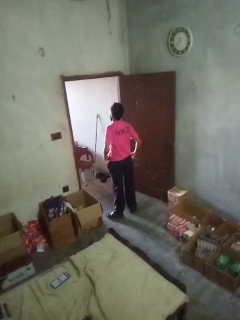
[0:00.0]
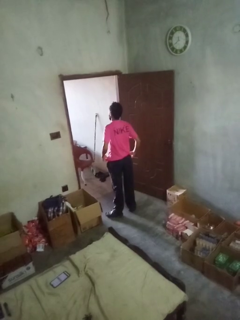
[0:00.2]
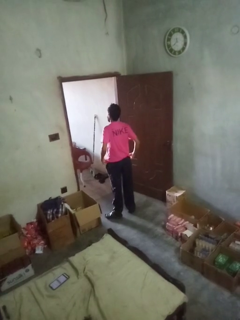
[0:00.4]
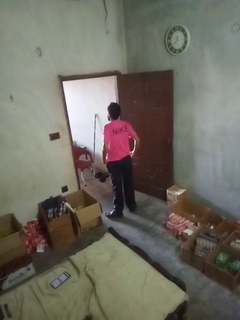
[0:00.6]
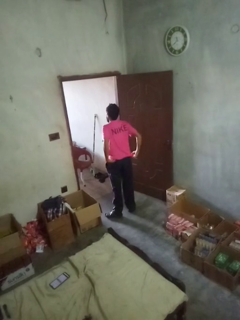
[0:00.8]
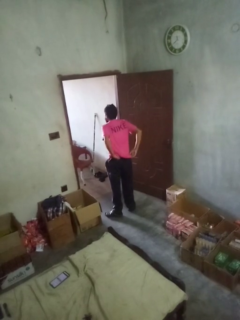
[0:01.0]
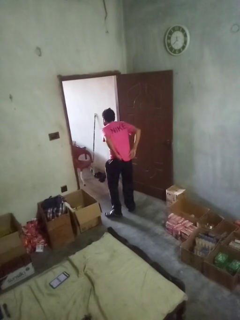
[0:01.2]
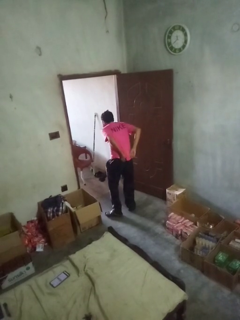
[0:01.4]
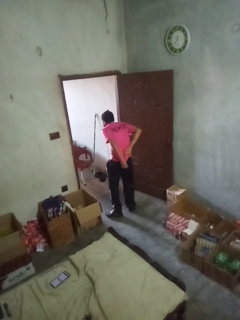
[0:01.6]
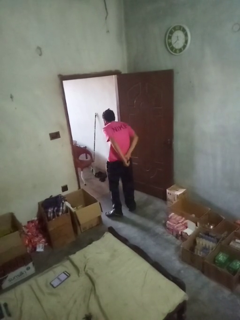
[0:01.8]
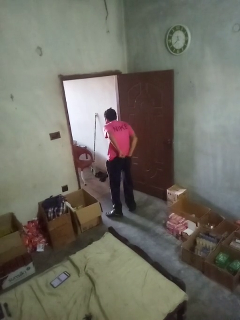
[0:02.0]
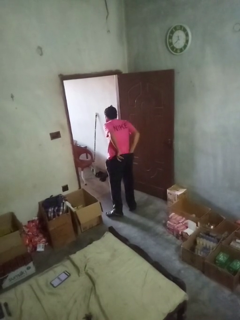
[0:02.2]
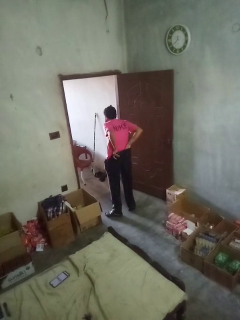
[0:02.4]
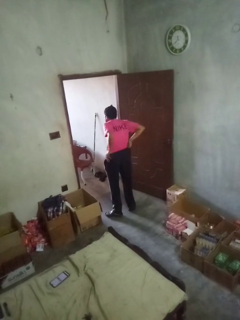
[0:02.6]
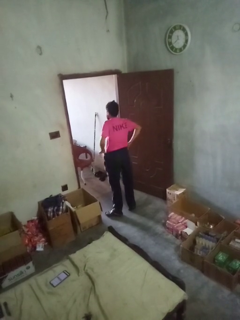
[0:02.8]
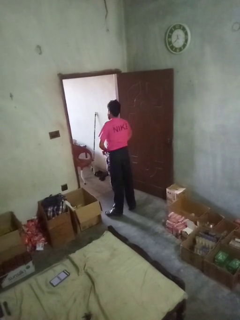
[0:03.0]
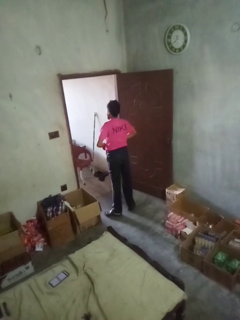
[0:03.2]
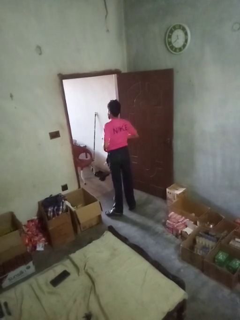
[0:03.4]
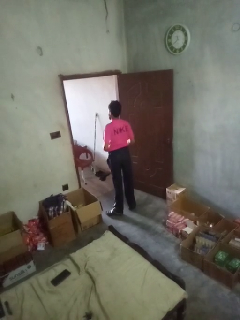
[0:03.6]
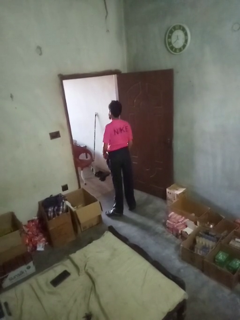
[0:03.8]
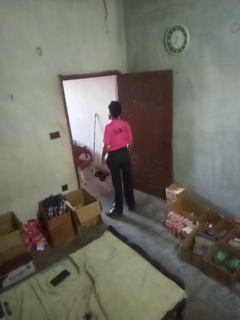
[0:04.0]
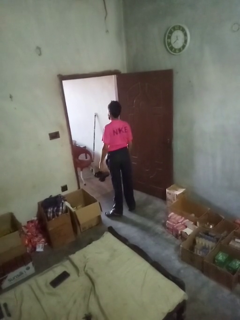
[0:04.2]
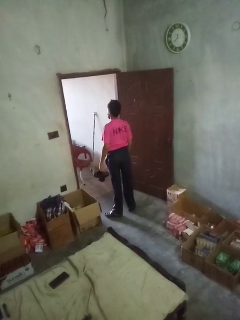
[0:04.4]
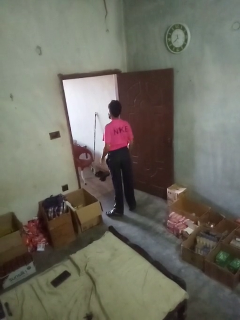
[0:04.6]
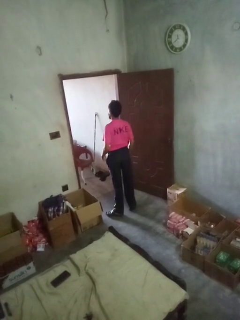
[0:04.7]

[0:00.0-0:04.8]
person tucks in shirt

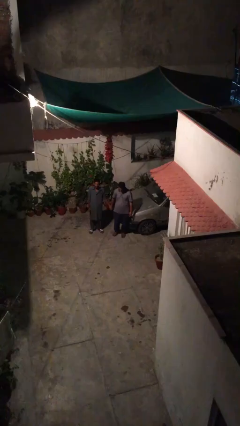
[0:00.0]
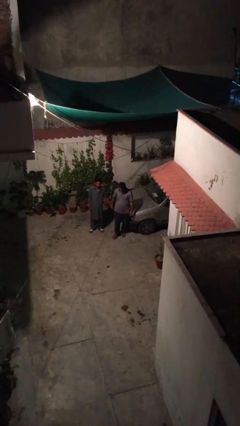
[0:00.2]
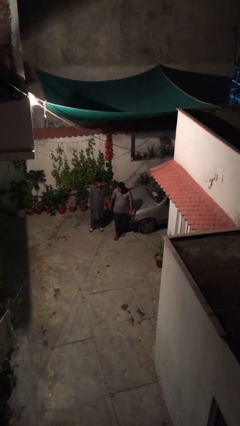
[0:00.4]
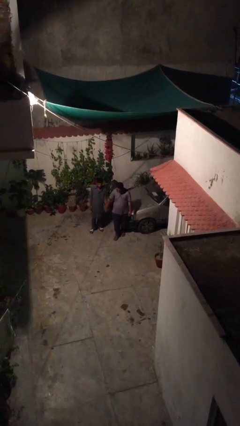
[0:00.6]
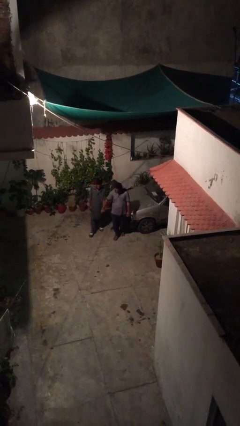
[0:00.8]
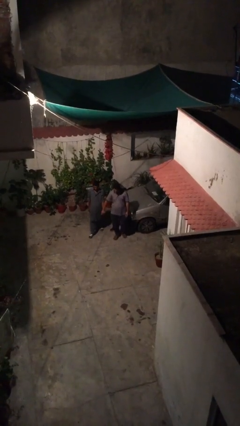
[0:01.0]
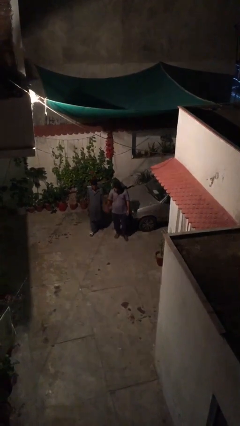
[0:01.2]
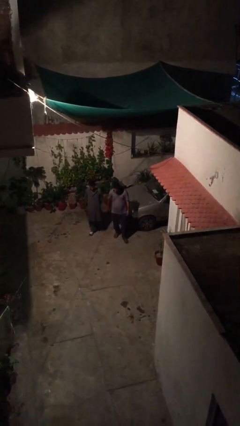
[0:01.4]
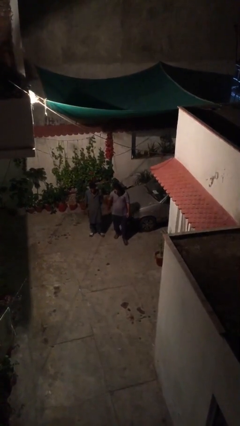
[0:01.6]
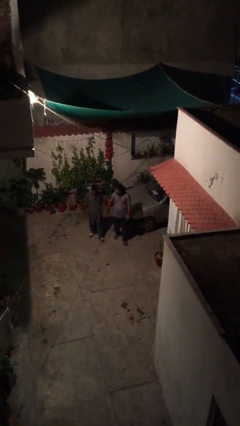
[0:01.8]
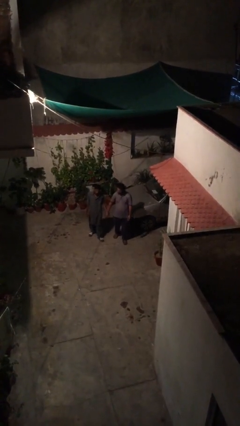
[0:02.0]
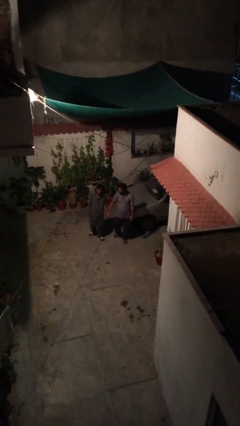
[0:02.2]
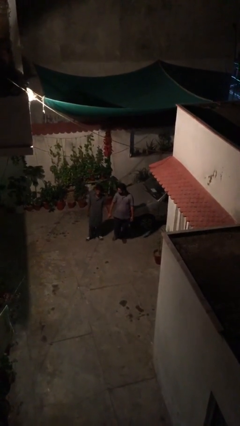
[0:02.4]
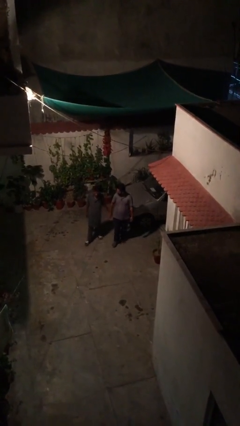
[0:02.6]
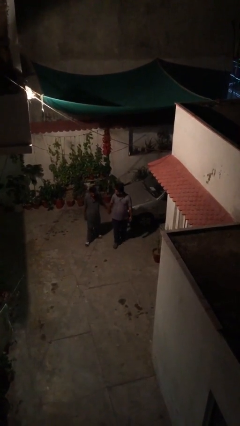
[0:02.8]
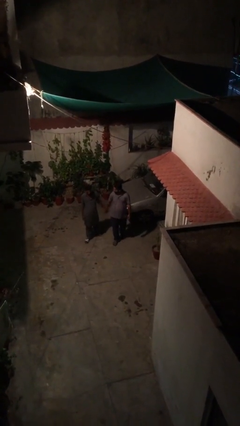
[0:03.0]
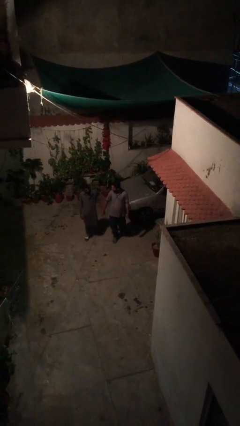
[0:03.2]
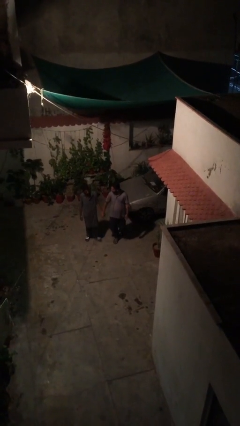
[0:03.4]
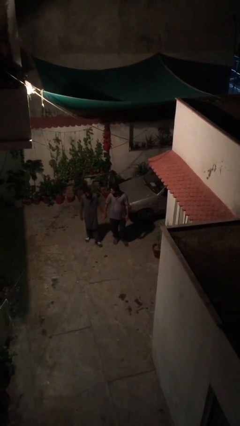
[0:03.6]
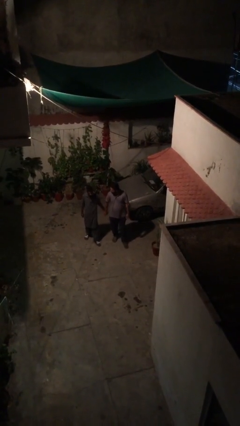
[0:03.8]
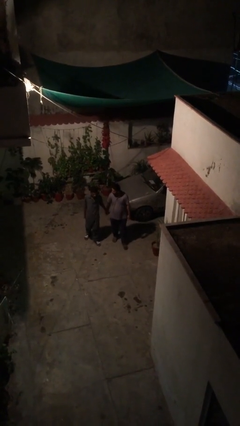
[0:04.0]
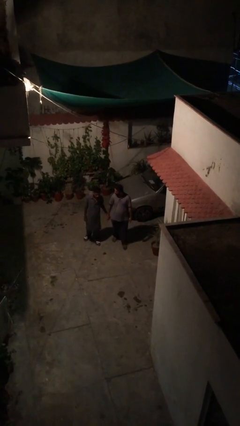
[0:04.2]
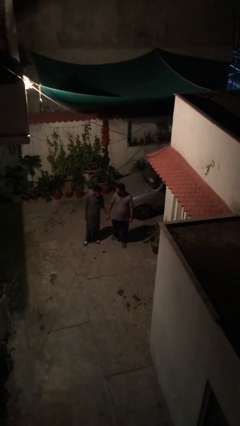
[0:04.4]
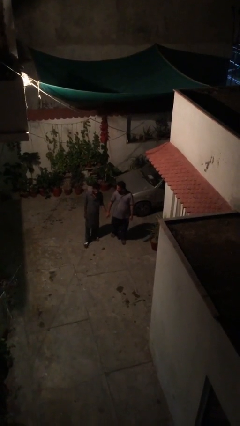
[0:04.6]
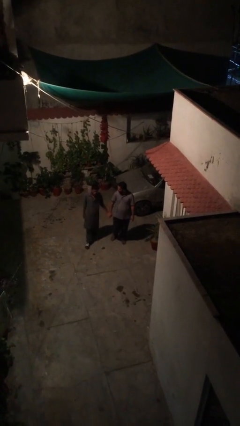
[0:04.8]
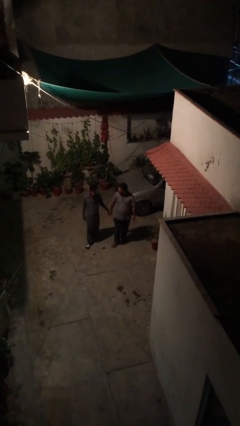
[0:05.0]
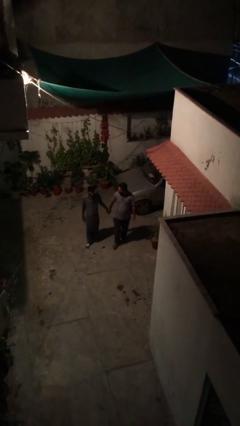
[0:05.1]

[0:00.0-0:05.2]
person holds hand

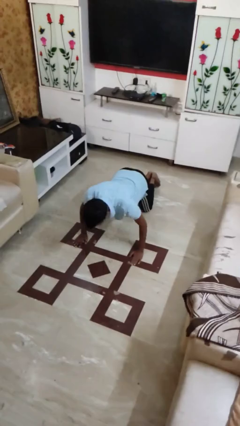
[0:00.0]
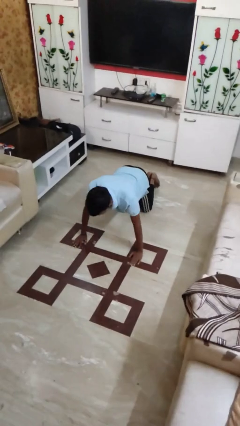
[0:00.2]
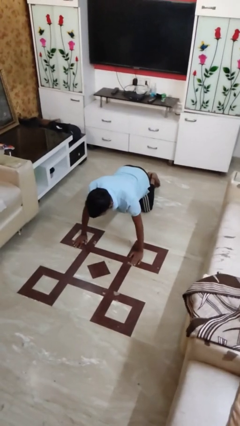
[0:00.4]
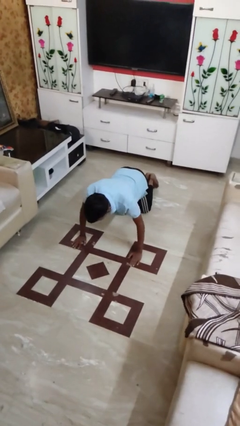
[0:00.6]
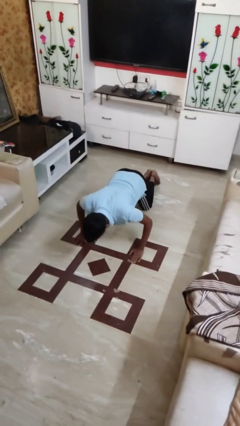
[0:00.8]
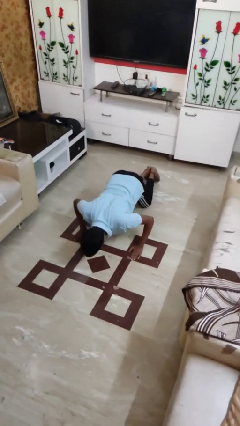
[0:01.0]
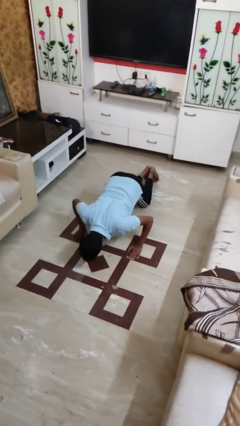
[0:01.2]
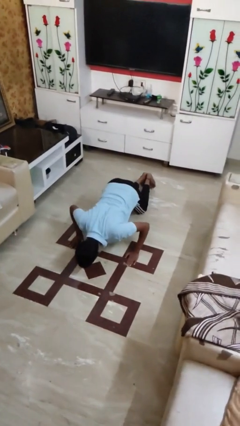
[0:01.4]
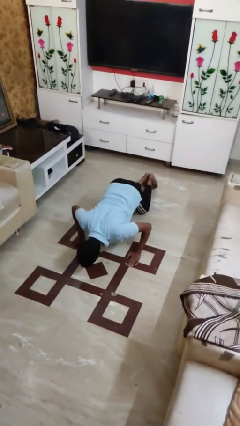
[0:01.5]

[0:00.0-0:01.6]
person exercises with pushup

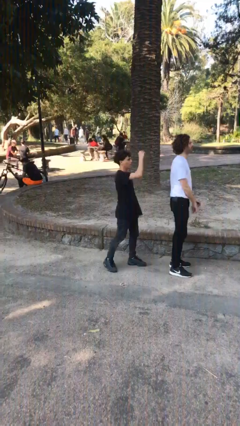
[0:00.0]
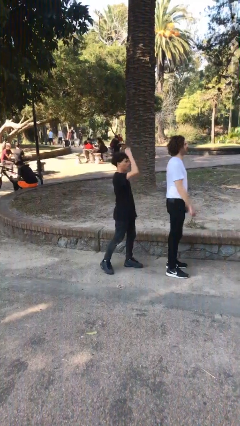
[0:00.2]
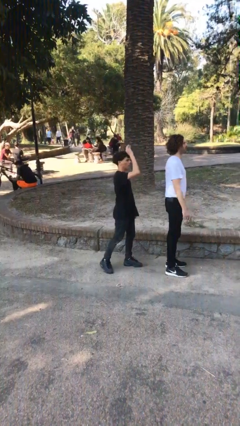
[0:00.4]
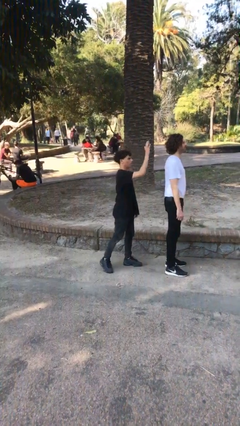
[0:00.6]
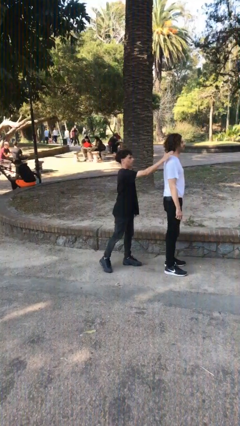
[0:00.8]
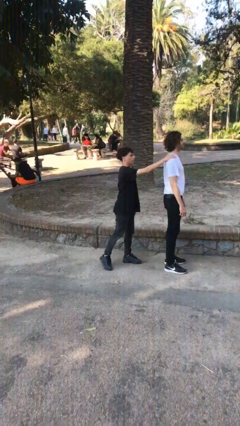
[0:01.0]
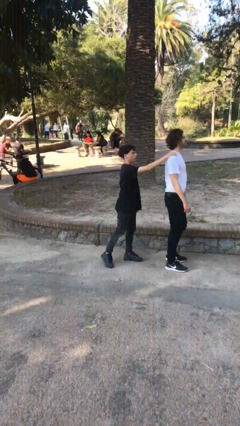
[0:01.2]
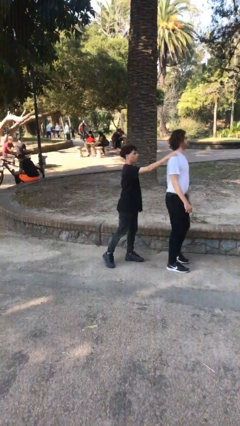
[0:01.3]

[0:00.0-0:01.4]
person grabs person by shoulder

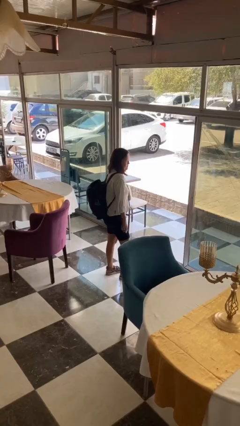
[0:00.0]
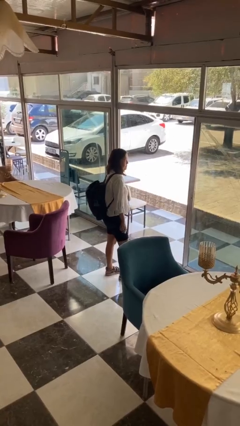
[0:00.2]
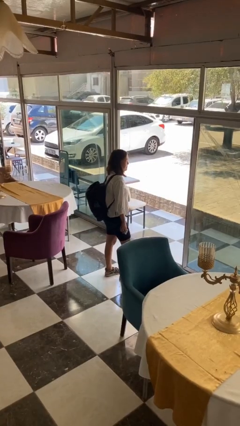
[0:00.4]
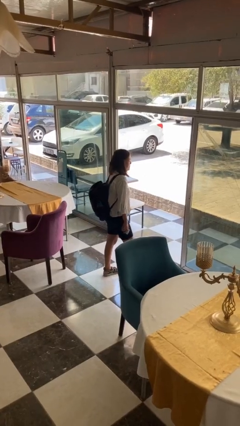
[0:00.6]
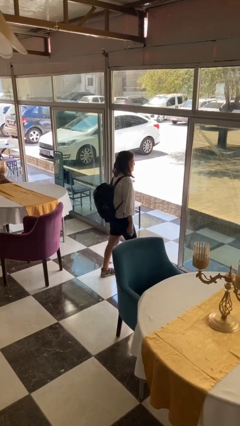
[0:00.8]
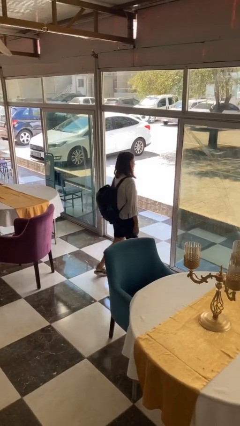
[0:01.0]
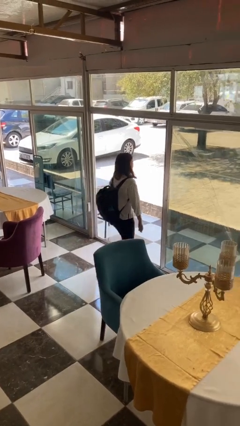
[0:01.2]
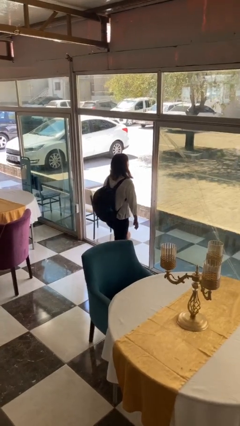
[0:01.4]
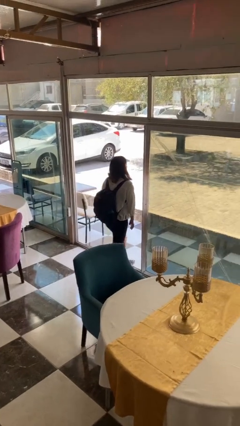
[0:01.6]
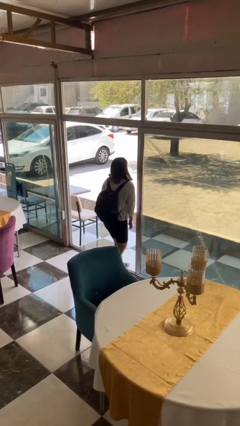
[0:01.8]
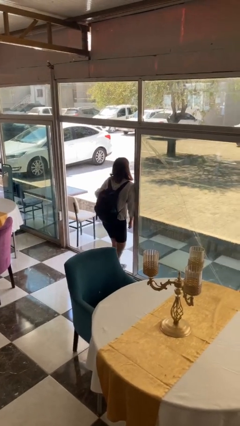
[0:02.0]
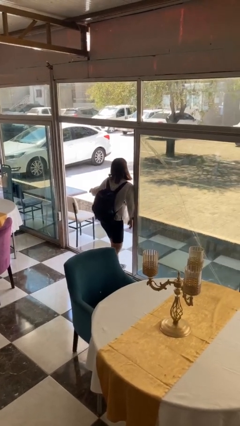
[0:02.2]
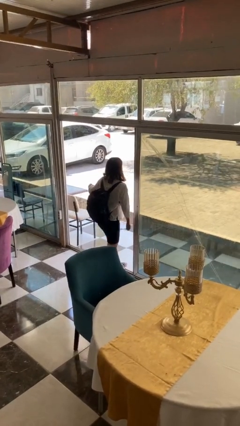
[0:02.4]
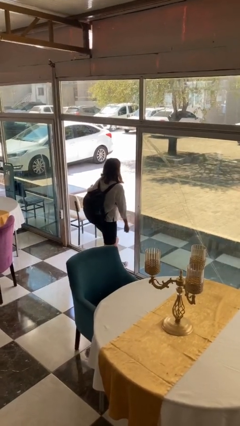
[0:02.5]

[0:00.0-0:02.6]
person bumps into wall

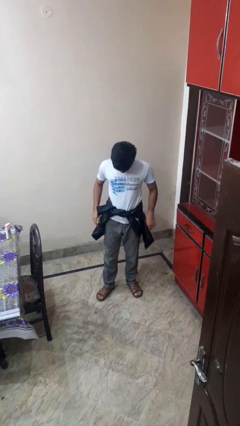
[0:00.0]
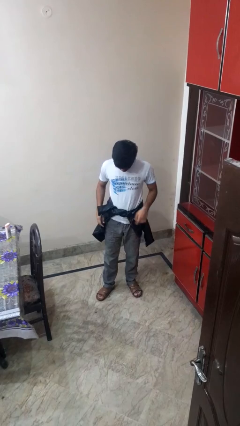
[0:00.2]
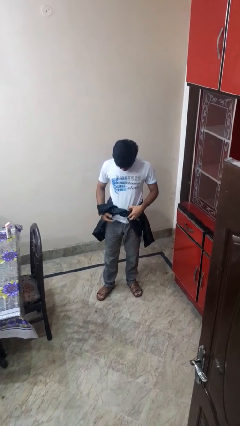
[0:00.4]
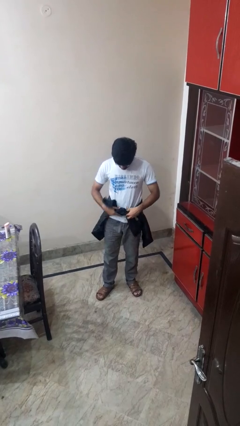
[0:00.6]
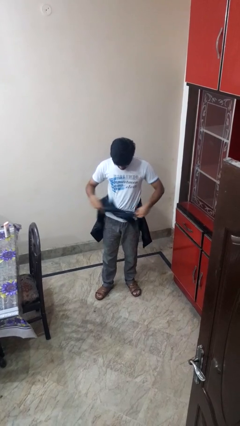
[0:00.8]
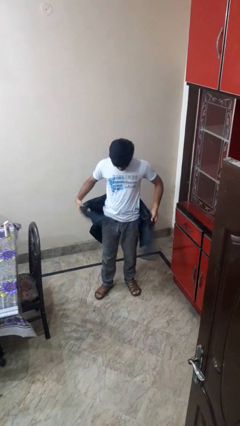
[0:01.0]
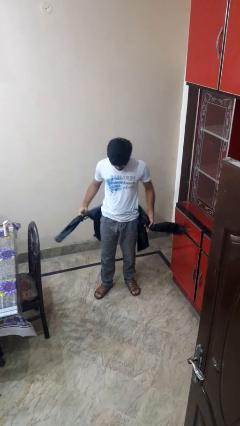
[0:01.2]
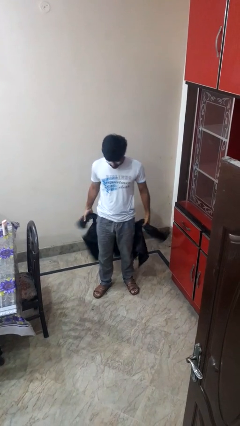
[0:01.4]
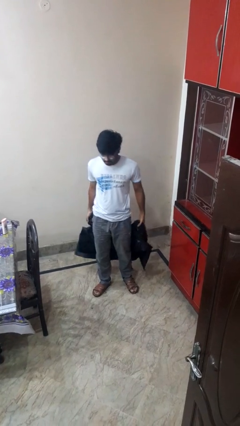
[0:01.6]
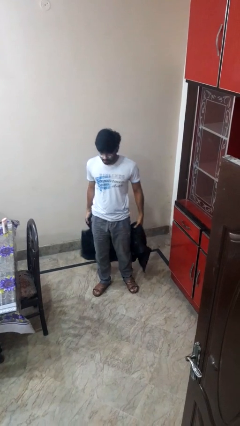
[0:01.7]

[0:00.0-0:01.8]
person unties jacket around waist

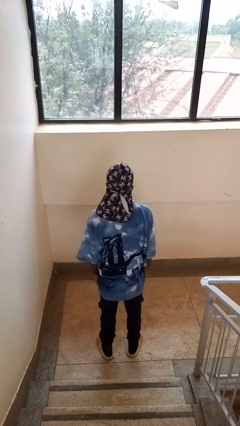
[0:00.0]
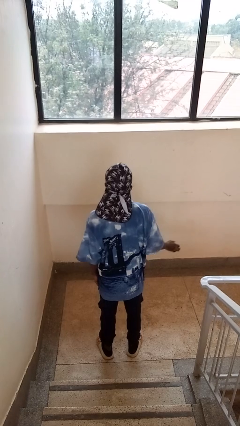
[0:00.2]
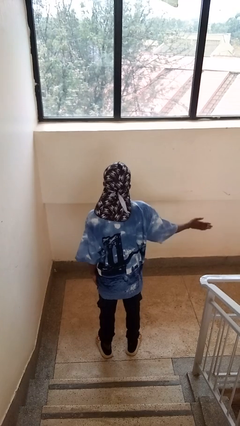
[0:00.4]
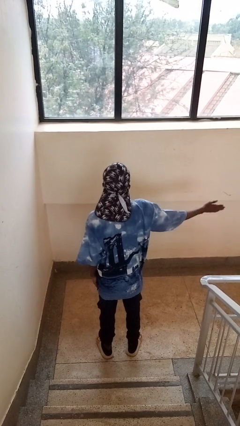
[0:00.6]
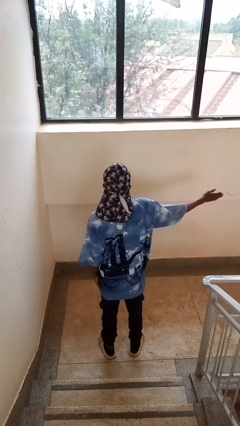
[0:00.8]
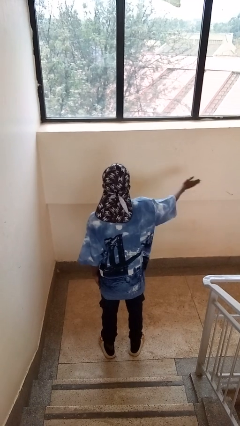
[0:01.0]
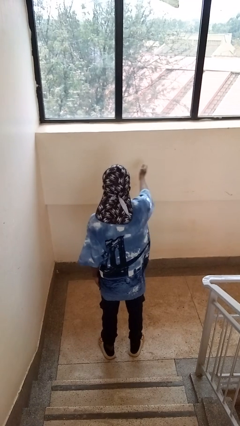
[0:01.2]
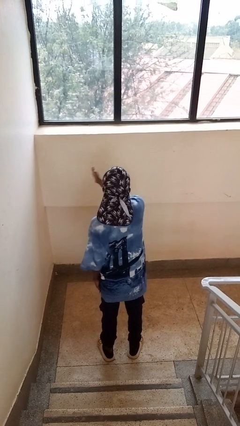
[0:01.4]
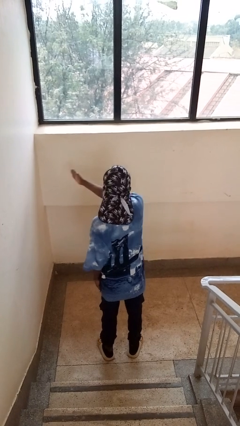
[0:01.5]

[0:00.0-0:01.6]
person gestures swipe left
